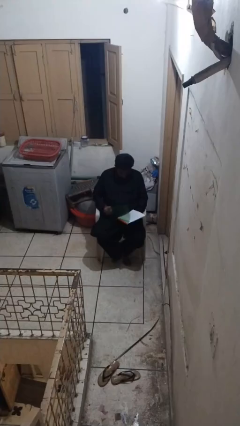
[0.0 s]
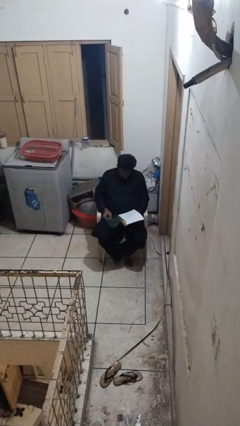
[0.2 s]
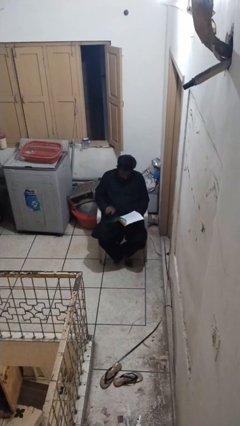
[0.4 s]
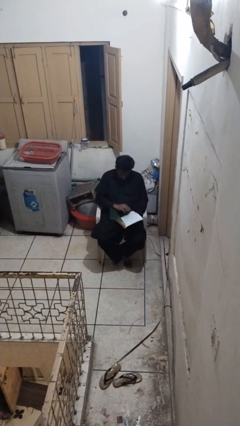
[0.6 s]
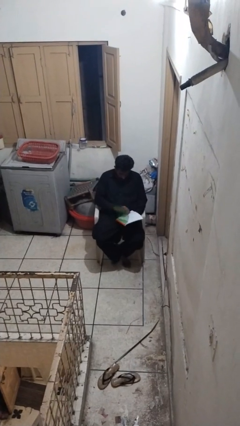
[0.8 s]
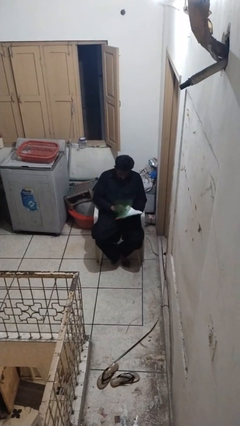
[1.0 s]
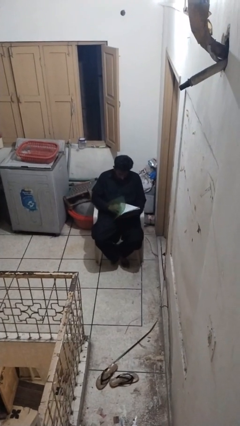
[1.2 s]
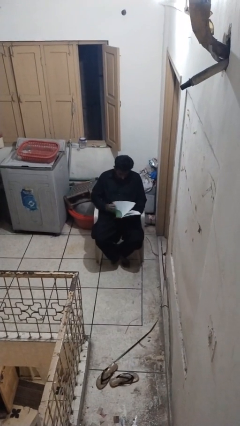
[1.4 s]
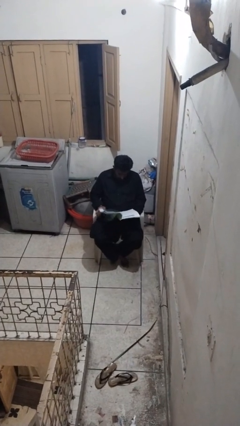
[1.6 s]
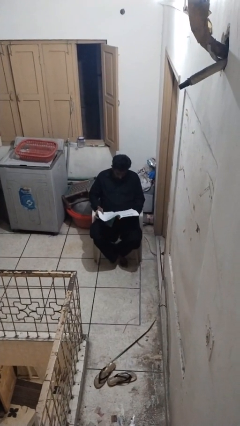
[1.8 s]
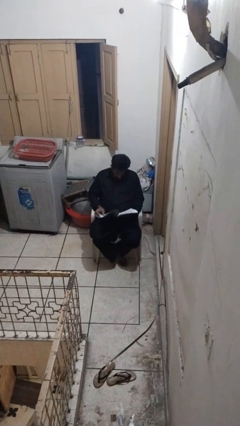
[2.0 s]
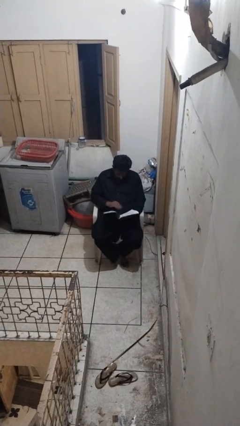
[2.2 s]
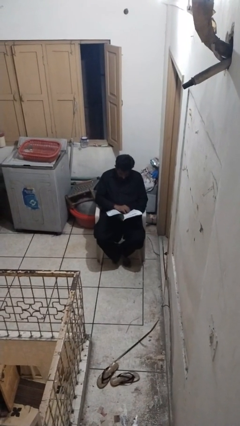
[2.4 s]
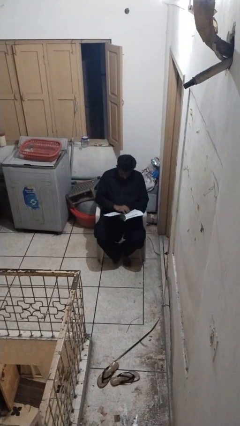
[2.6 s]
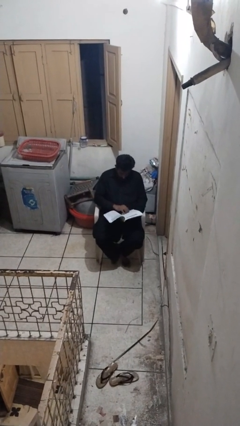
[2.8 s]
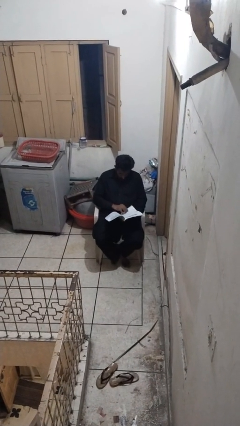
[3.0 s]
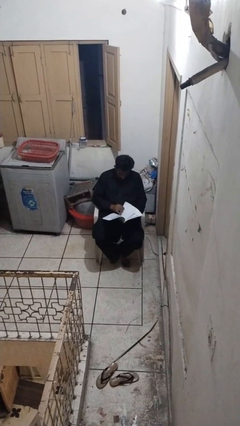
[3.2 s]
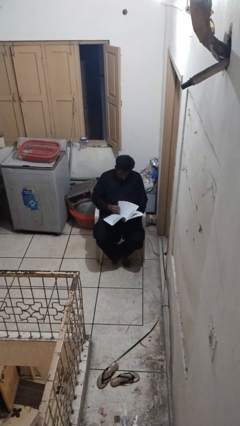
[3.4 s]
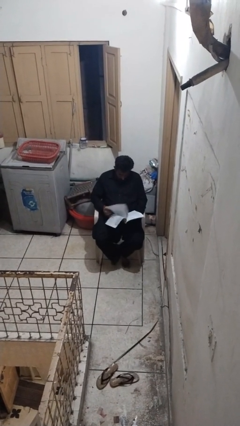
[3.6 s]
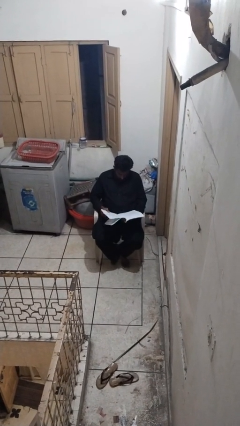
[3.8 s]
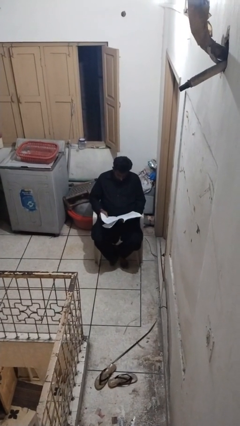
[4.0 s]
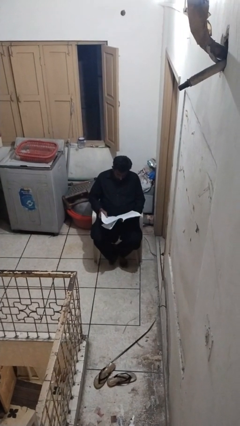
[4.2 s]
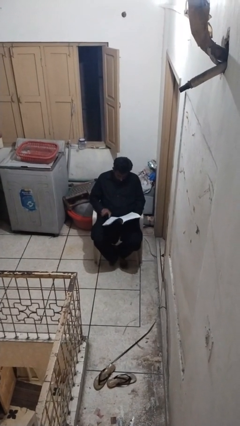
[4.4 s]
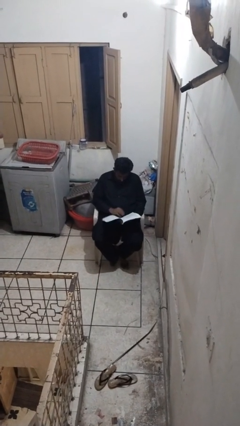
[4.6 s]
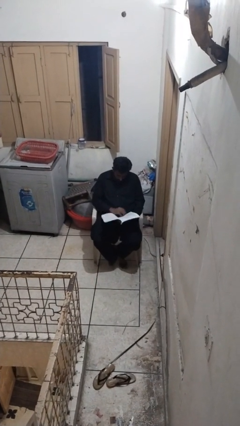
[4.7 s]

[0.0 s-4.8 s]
person reads magazine

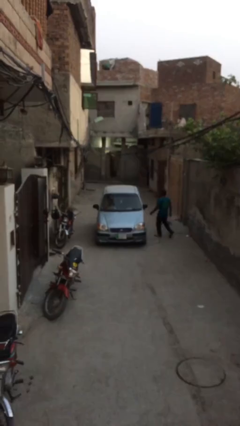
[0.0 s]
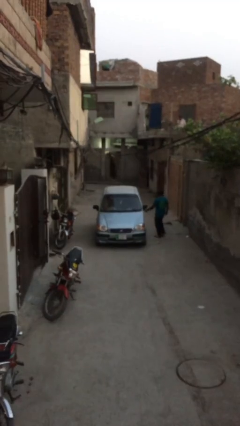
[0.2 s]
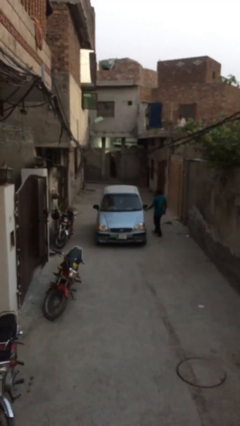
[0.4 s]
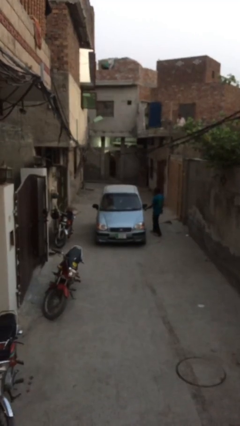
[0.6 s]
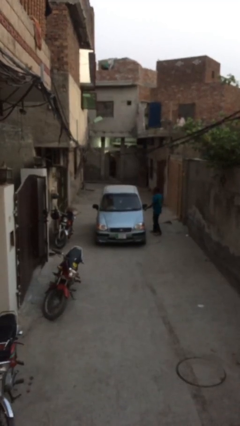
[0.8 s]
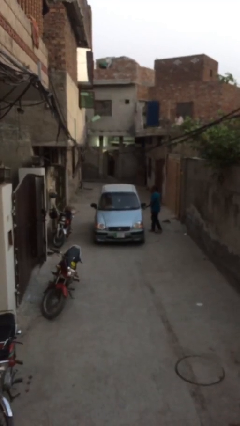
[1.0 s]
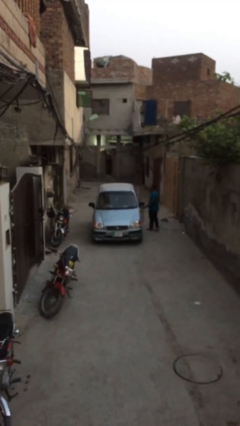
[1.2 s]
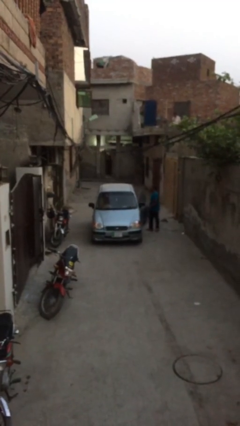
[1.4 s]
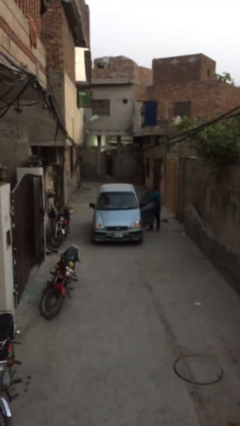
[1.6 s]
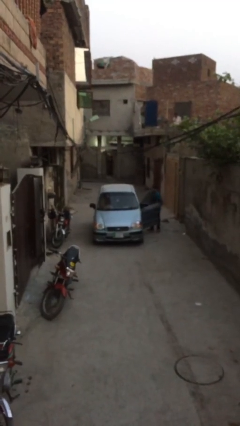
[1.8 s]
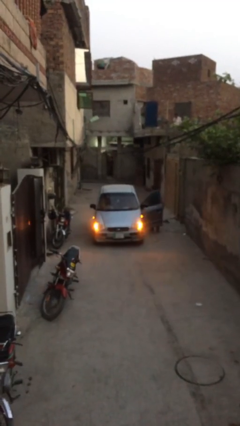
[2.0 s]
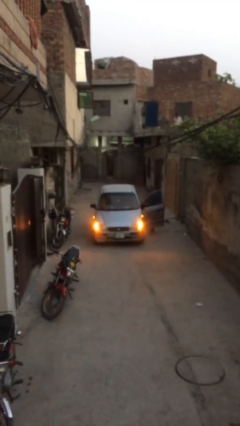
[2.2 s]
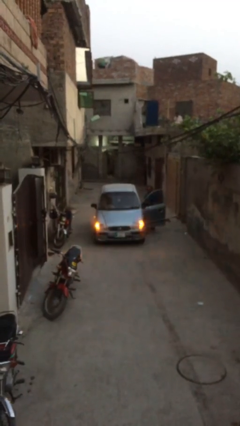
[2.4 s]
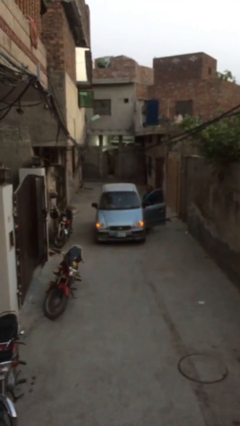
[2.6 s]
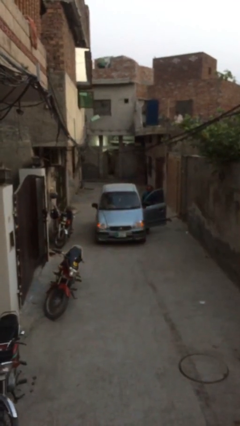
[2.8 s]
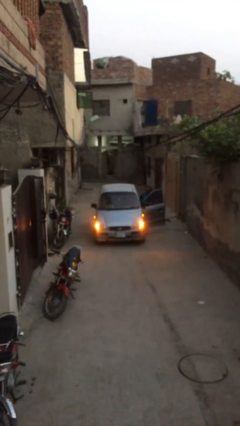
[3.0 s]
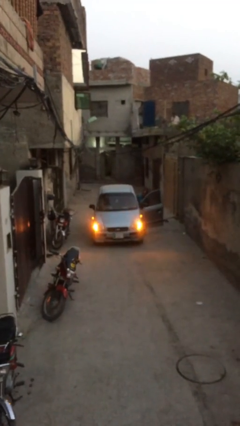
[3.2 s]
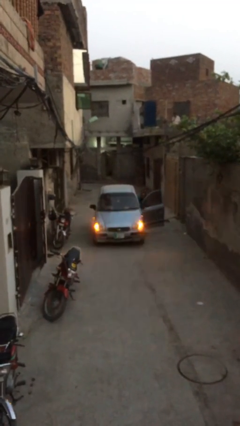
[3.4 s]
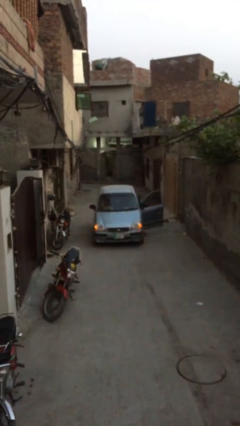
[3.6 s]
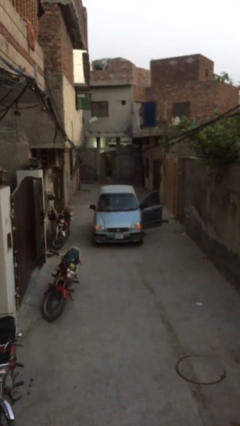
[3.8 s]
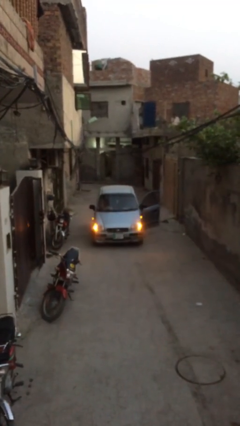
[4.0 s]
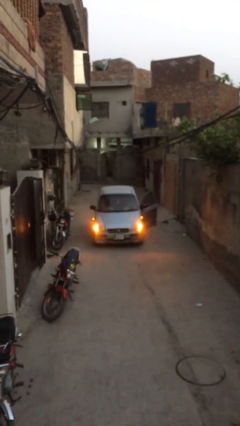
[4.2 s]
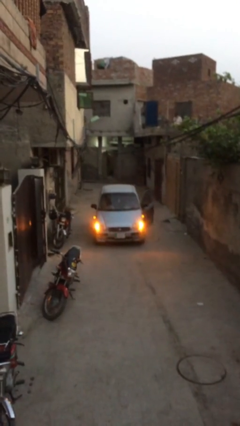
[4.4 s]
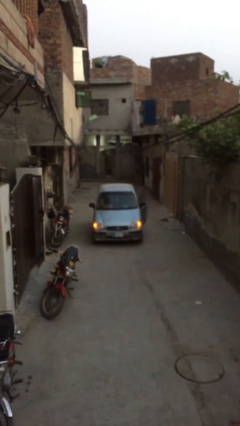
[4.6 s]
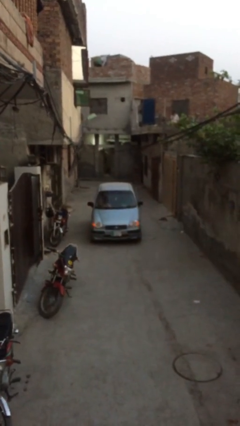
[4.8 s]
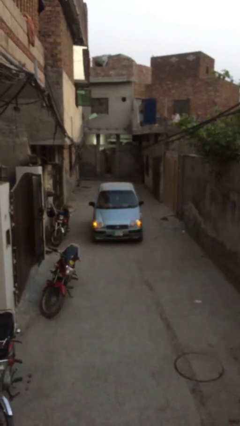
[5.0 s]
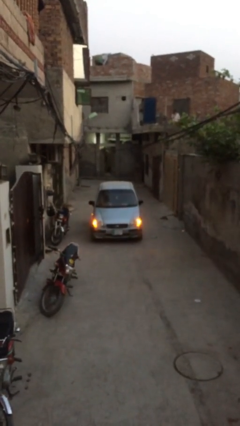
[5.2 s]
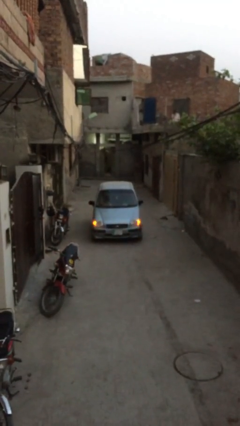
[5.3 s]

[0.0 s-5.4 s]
car picks up person

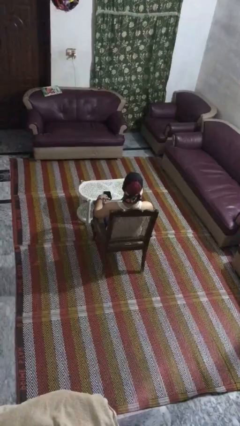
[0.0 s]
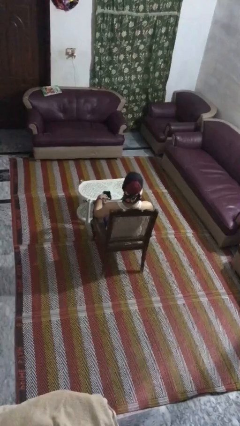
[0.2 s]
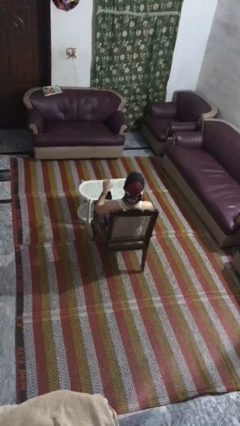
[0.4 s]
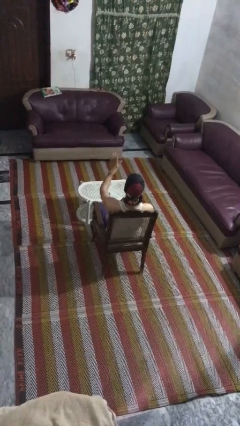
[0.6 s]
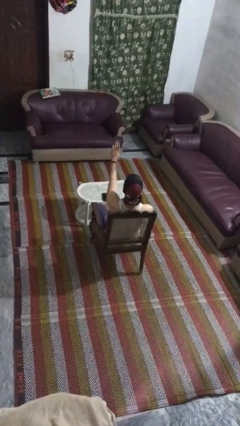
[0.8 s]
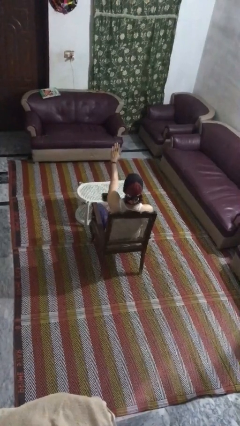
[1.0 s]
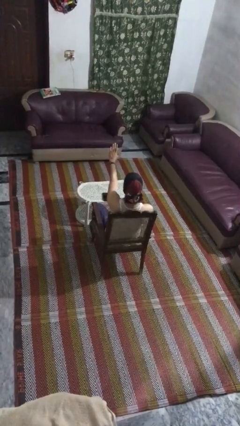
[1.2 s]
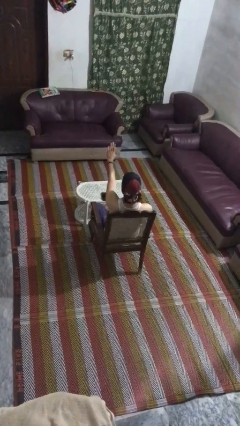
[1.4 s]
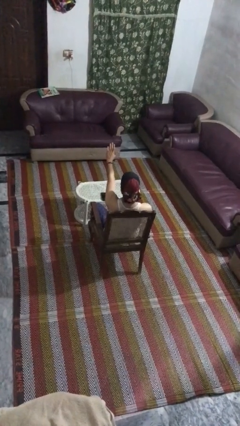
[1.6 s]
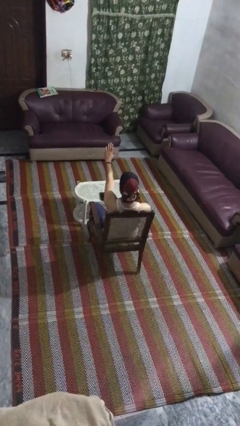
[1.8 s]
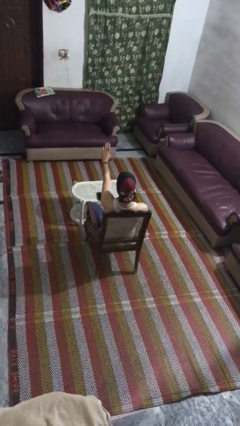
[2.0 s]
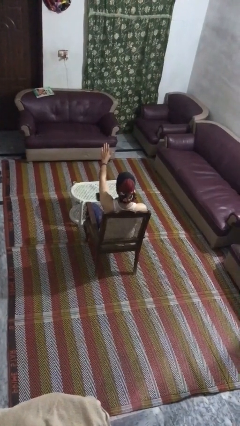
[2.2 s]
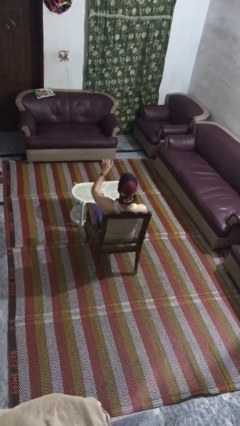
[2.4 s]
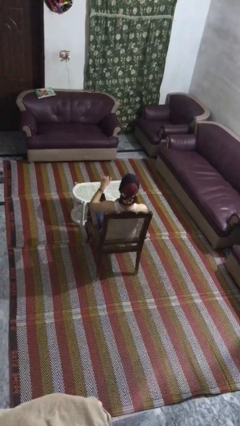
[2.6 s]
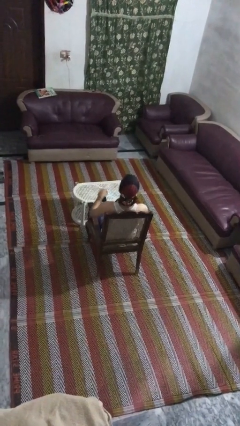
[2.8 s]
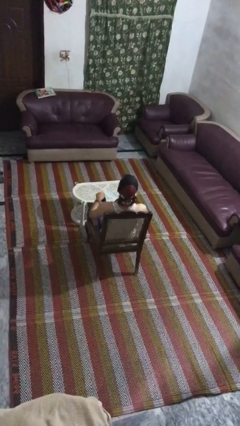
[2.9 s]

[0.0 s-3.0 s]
person gestures stop

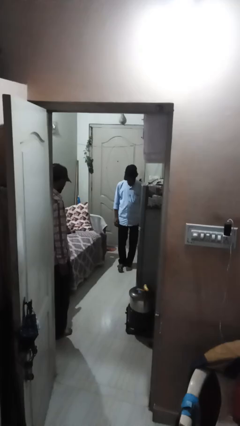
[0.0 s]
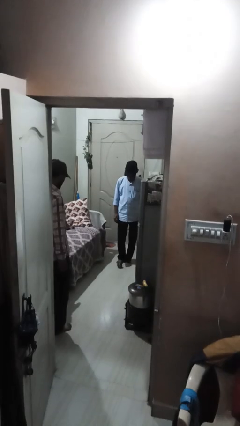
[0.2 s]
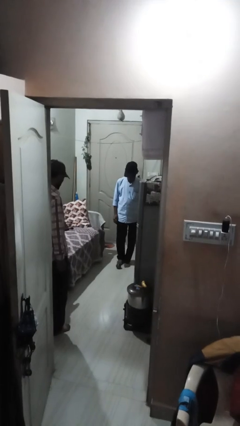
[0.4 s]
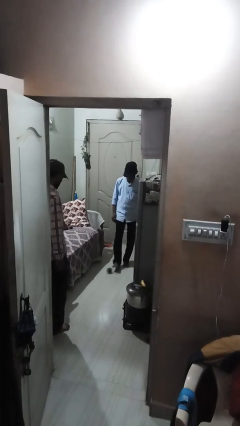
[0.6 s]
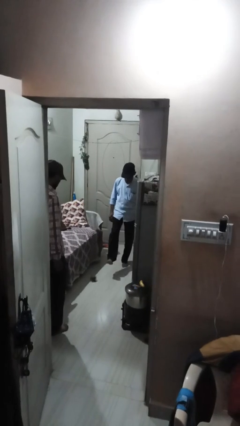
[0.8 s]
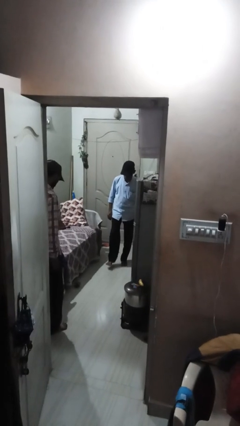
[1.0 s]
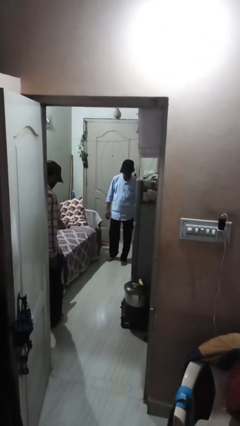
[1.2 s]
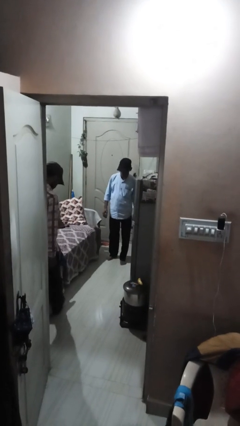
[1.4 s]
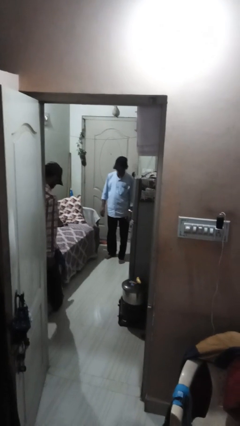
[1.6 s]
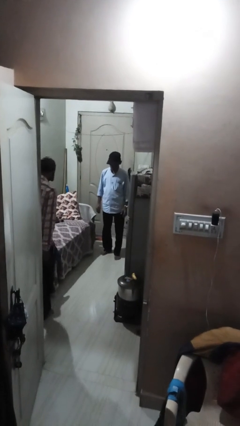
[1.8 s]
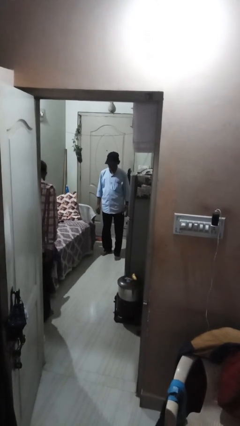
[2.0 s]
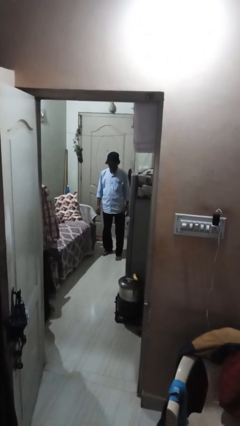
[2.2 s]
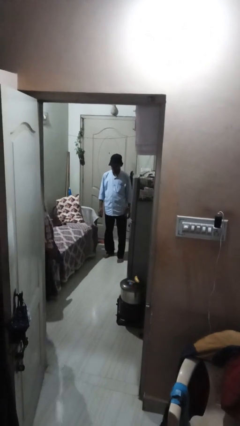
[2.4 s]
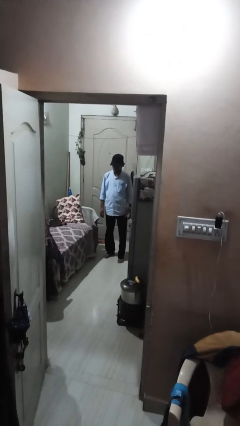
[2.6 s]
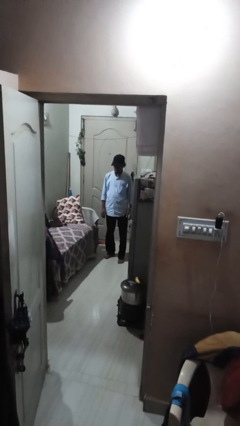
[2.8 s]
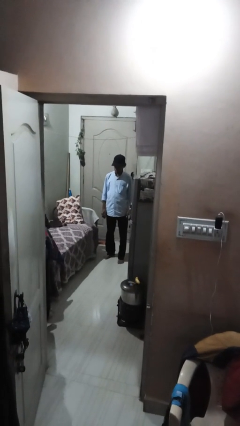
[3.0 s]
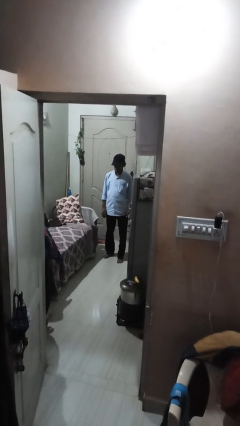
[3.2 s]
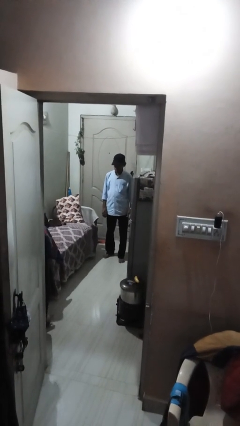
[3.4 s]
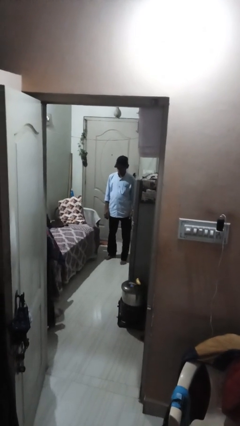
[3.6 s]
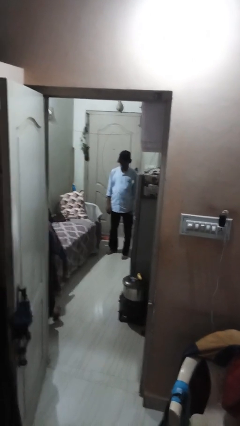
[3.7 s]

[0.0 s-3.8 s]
person kicks object to person

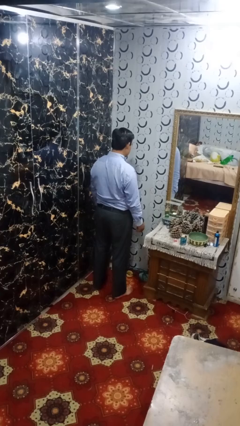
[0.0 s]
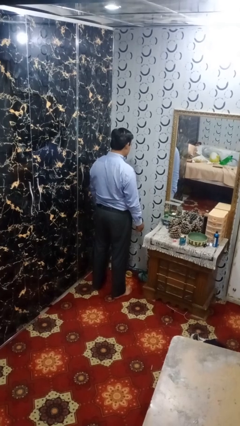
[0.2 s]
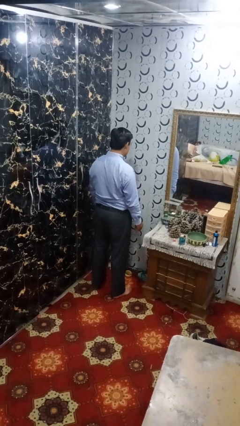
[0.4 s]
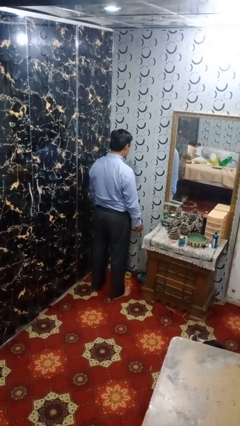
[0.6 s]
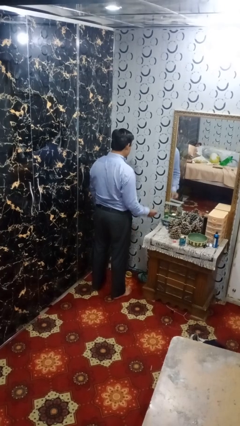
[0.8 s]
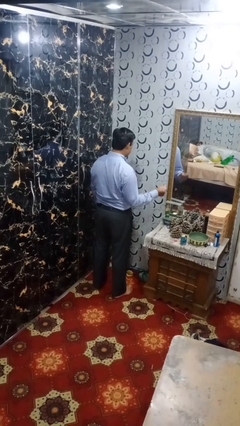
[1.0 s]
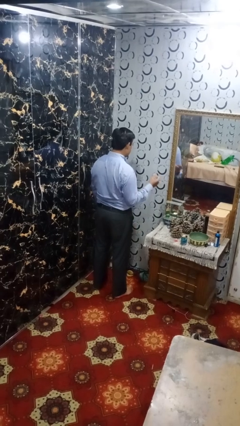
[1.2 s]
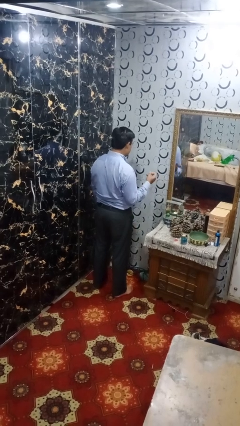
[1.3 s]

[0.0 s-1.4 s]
person snaps fingers
